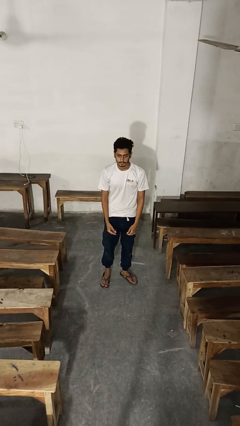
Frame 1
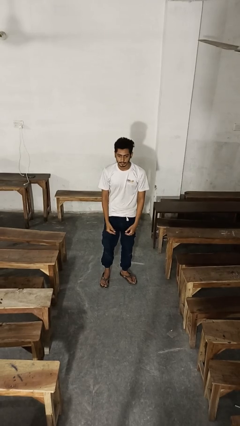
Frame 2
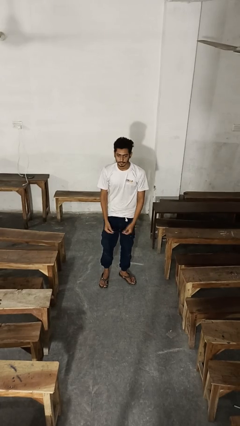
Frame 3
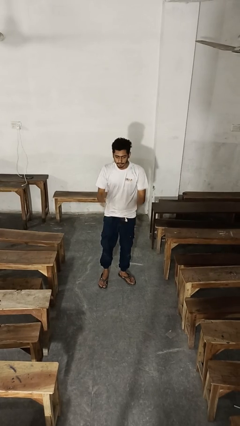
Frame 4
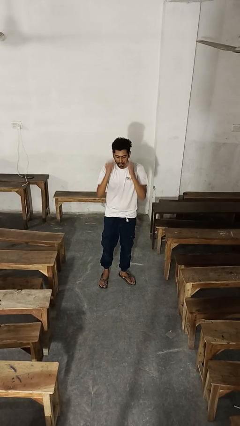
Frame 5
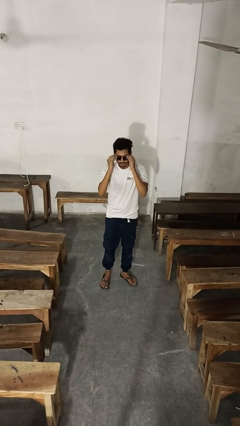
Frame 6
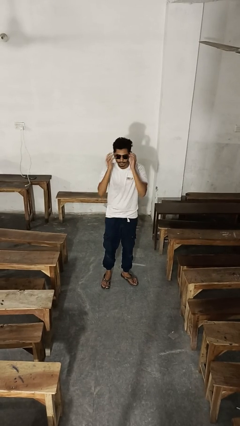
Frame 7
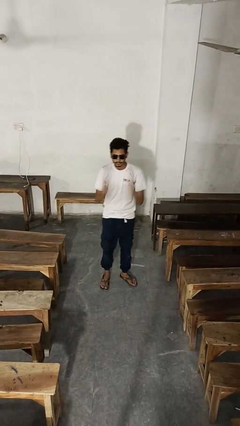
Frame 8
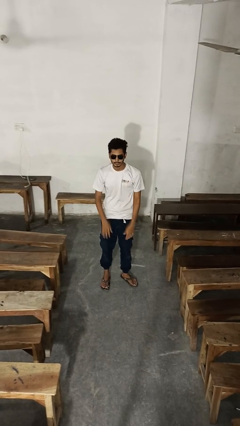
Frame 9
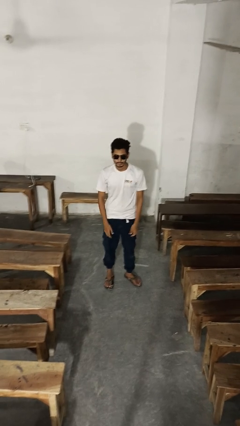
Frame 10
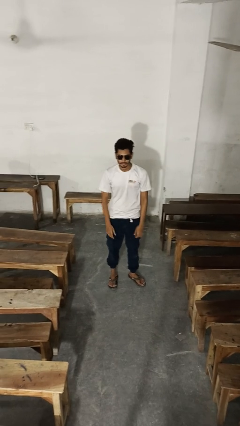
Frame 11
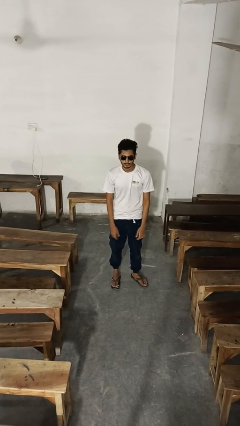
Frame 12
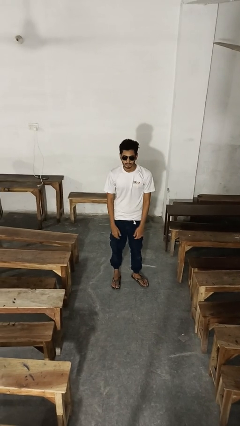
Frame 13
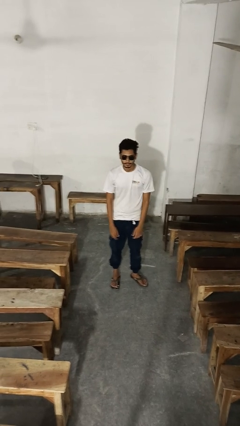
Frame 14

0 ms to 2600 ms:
person puts on sunglasses

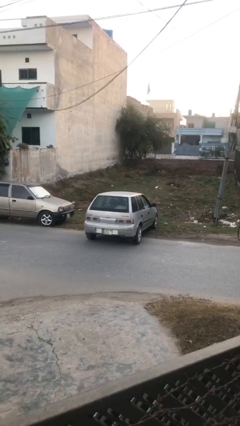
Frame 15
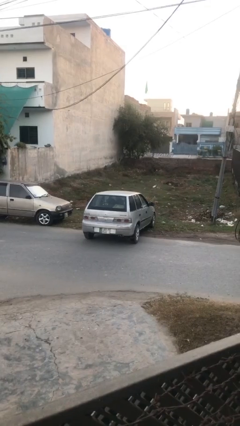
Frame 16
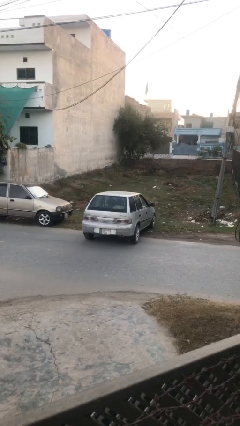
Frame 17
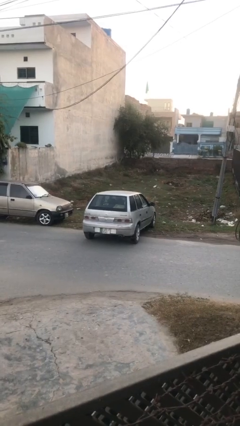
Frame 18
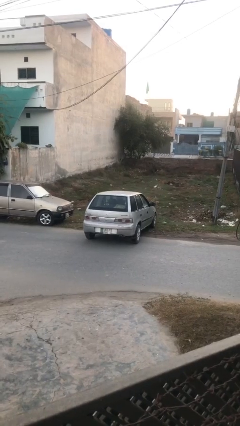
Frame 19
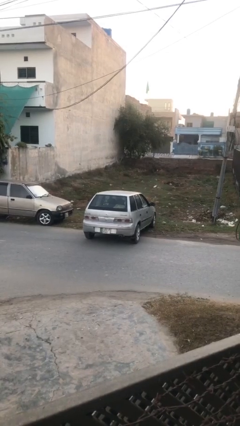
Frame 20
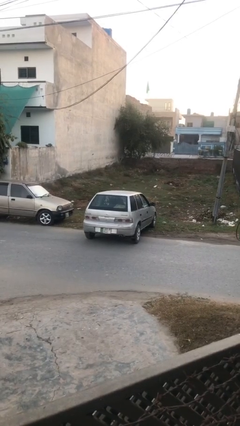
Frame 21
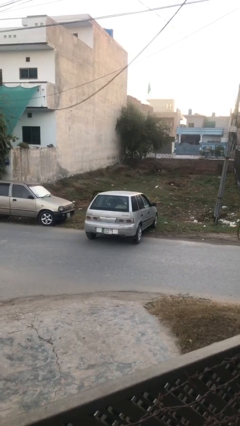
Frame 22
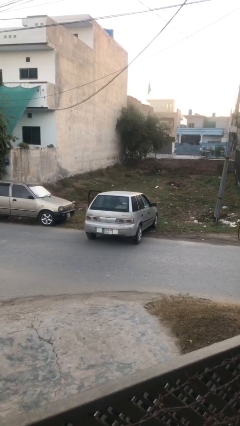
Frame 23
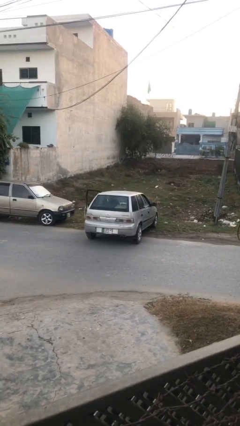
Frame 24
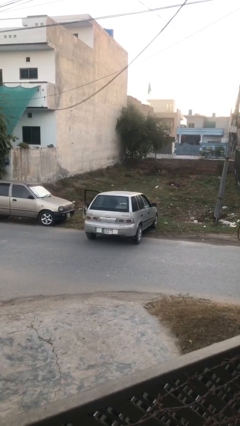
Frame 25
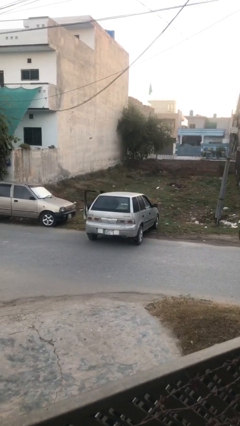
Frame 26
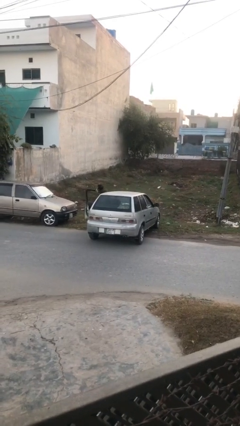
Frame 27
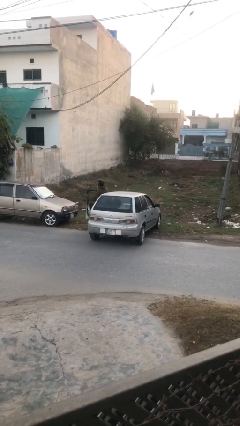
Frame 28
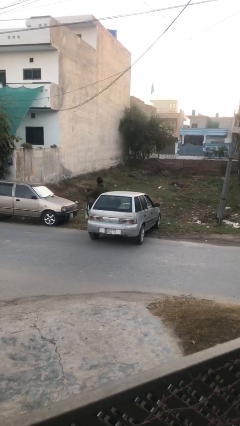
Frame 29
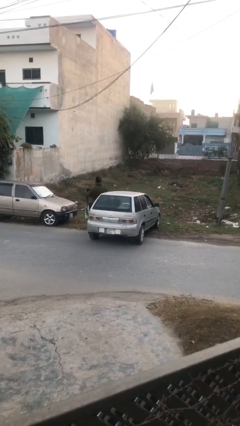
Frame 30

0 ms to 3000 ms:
car drops off person

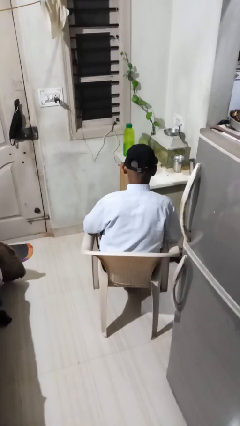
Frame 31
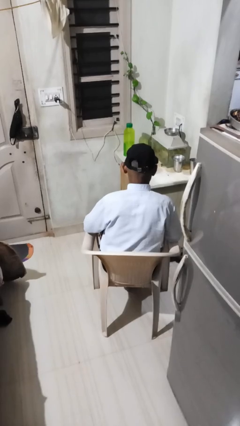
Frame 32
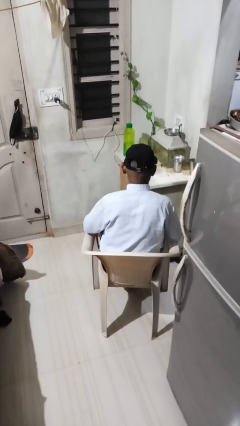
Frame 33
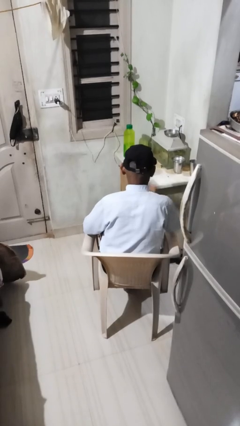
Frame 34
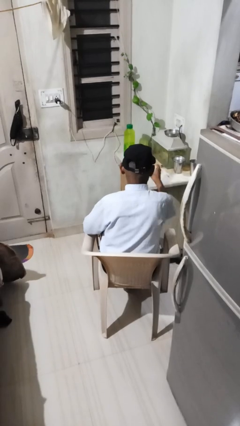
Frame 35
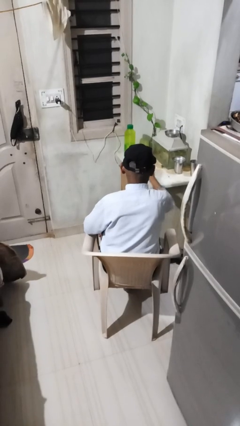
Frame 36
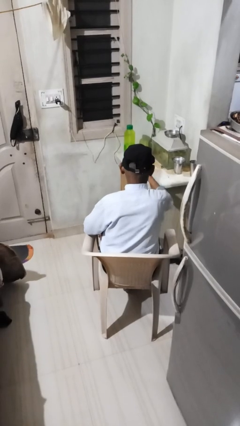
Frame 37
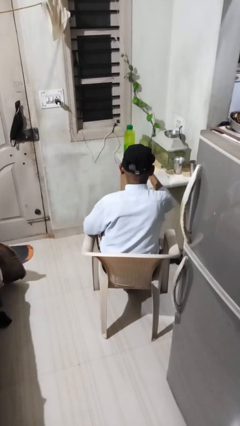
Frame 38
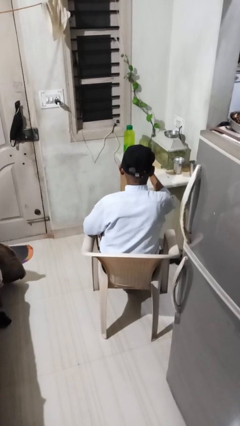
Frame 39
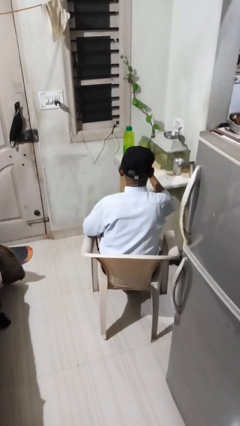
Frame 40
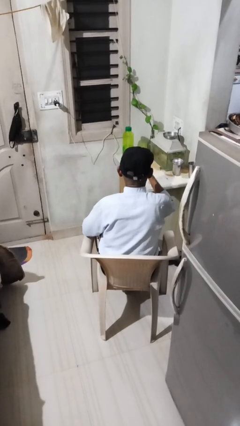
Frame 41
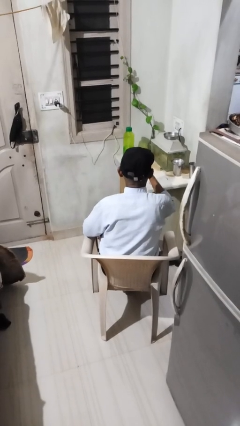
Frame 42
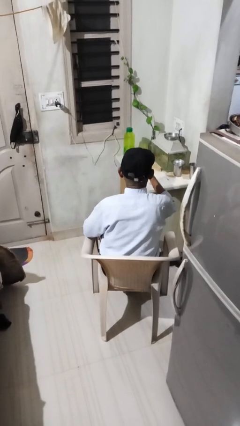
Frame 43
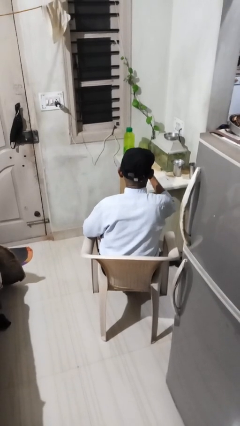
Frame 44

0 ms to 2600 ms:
person picks up object from table

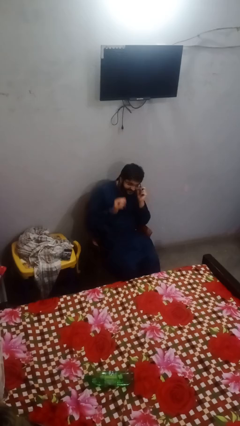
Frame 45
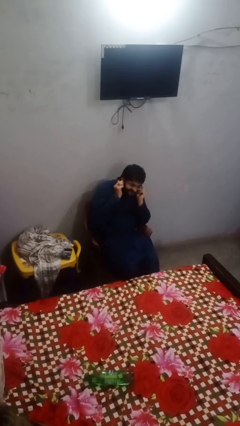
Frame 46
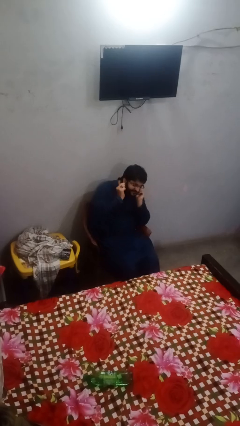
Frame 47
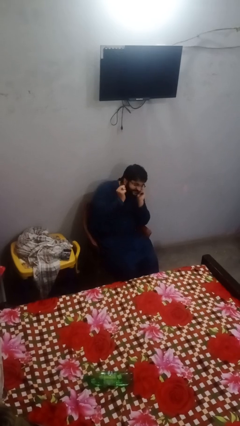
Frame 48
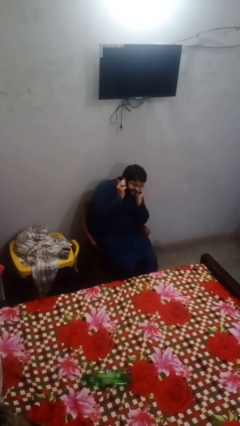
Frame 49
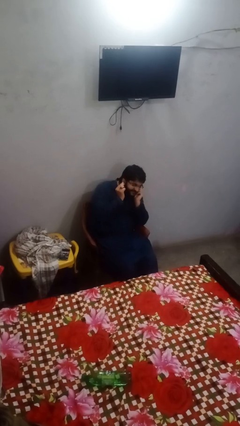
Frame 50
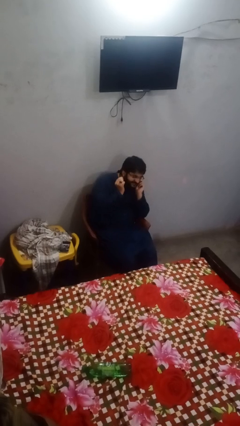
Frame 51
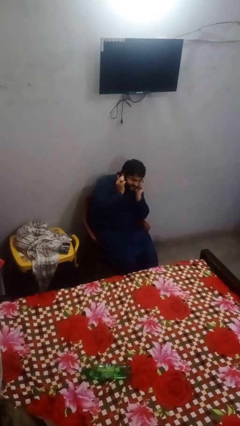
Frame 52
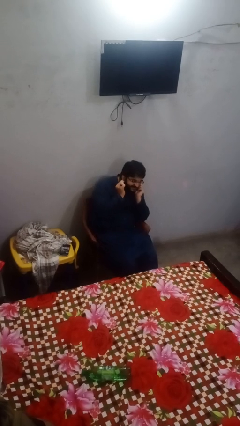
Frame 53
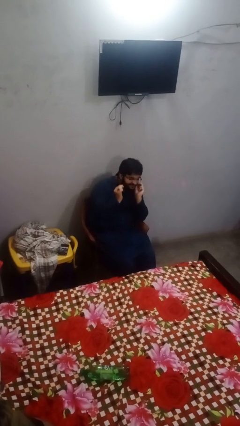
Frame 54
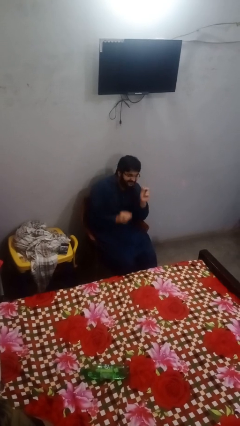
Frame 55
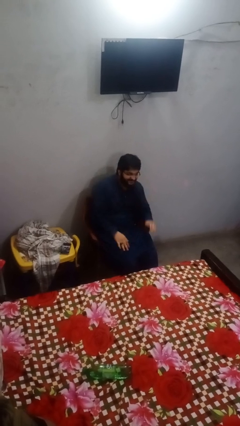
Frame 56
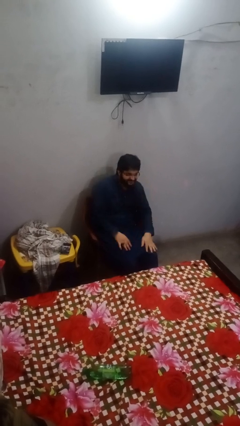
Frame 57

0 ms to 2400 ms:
person touches earlobe

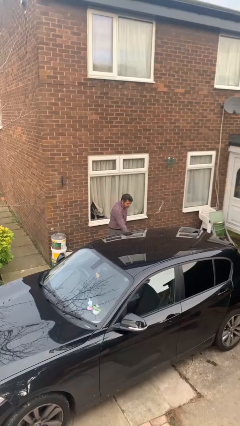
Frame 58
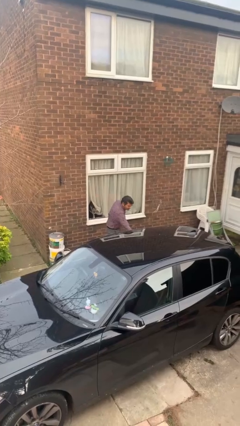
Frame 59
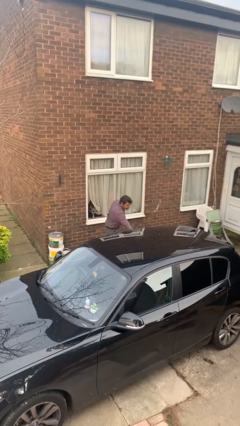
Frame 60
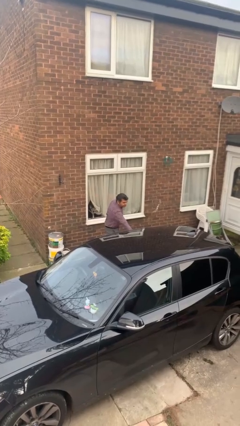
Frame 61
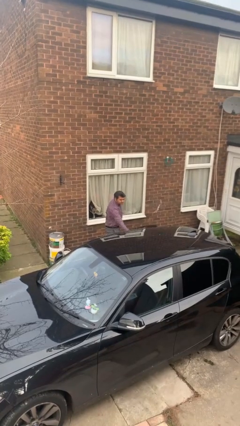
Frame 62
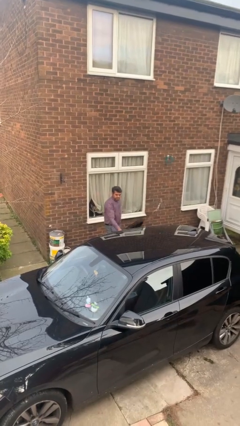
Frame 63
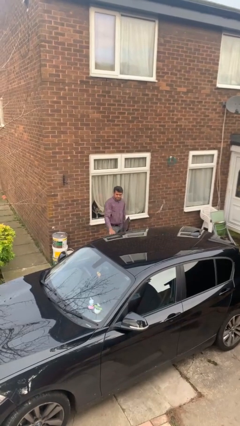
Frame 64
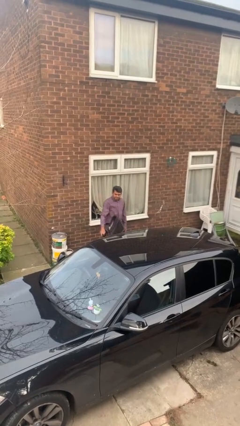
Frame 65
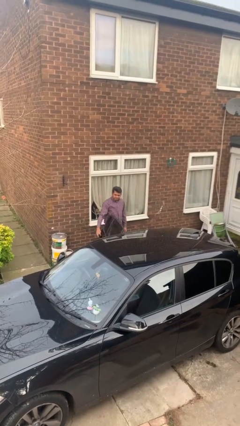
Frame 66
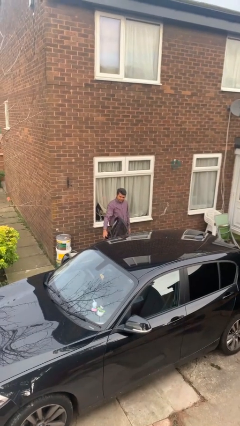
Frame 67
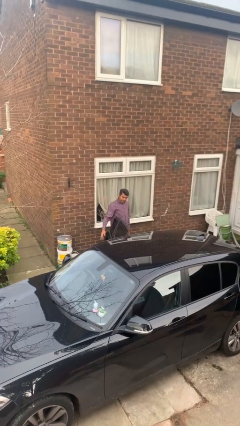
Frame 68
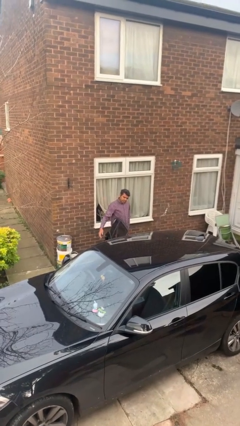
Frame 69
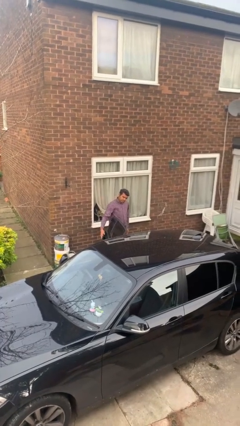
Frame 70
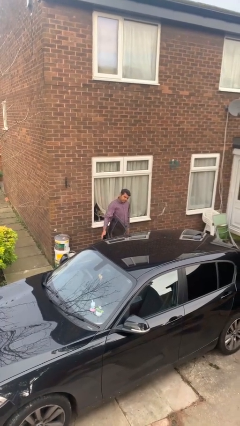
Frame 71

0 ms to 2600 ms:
person opens car door

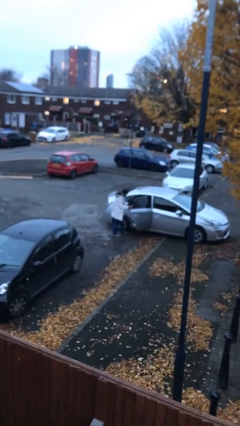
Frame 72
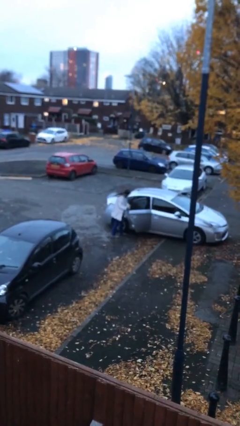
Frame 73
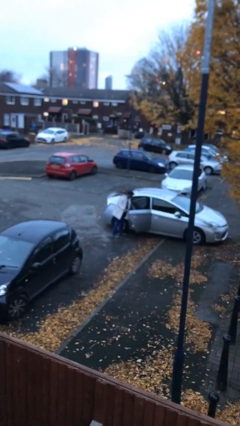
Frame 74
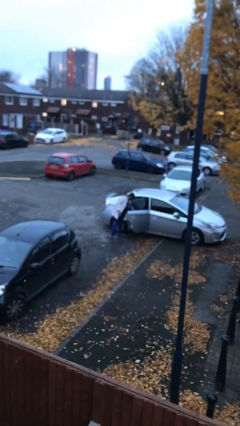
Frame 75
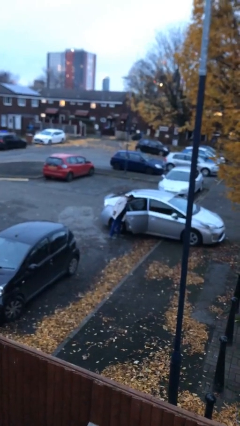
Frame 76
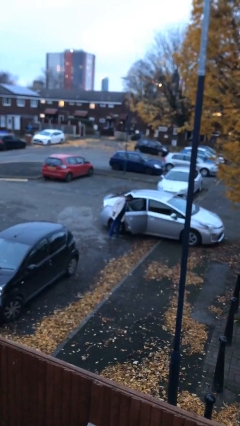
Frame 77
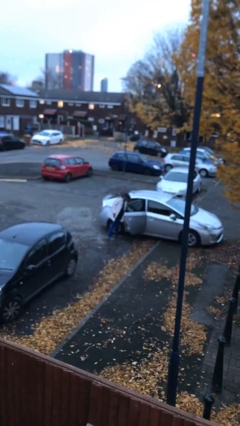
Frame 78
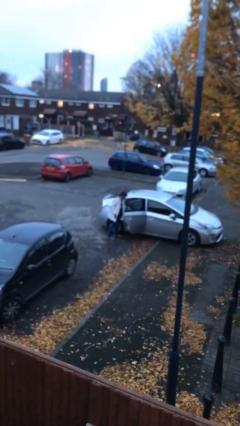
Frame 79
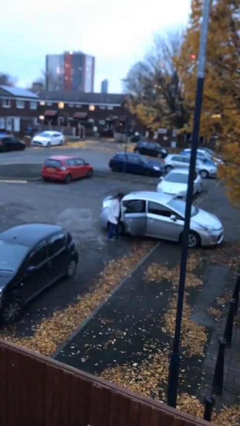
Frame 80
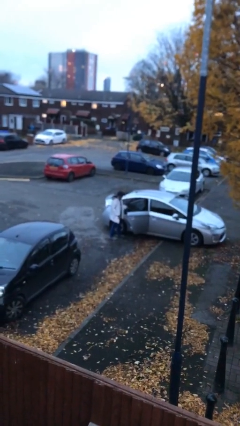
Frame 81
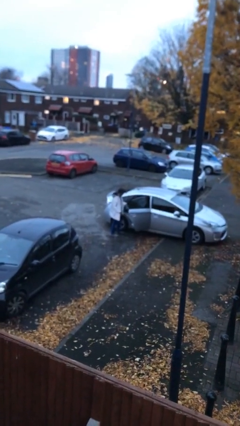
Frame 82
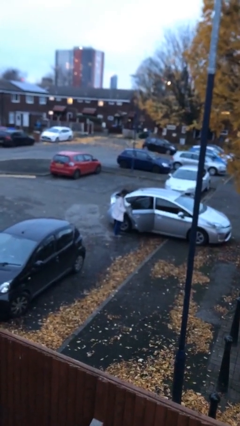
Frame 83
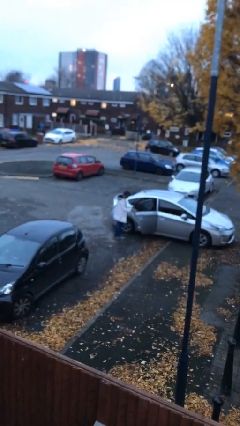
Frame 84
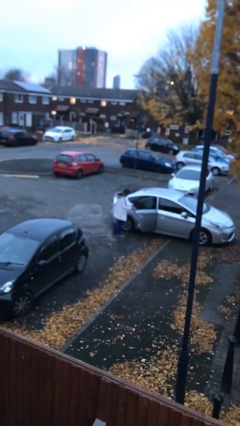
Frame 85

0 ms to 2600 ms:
person unloads car

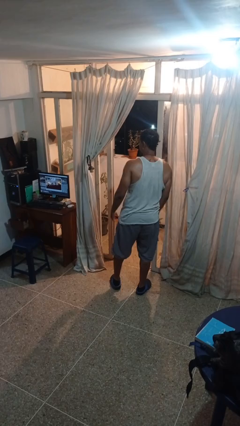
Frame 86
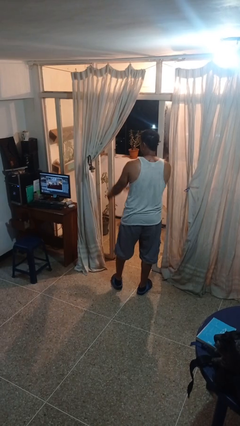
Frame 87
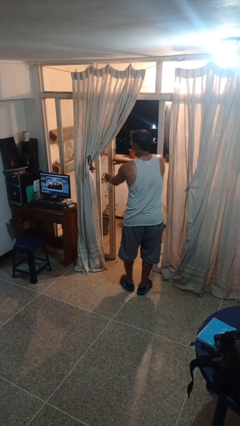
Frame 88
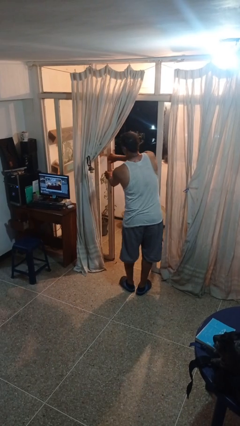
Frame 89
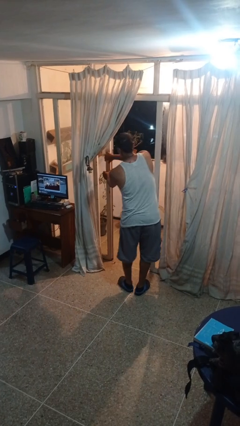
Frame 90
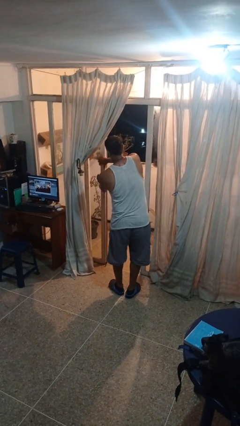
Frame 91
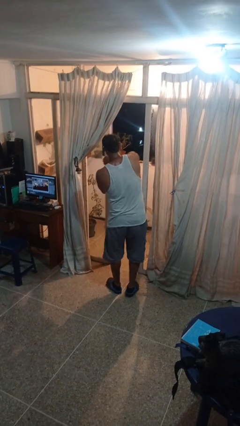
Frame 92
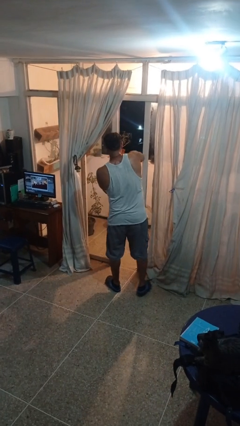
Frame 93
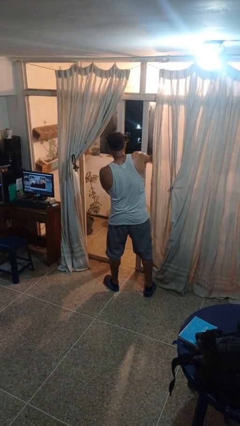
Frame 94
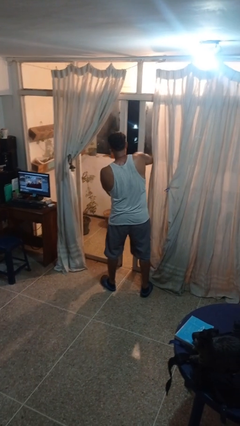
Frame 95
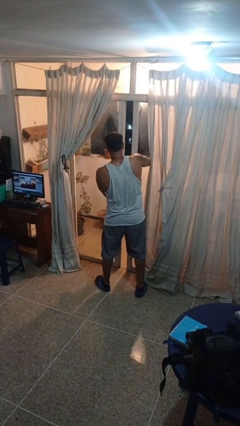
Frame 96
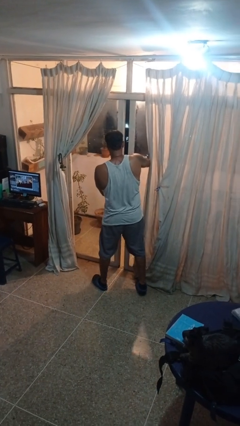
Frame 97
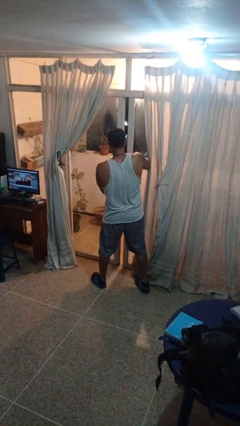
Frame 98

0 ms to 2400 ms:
person closes sliding door
